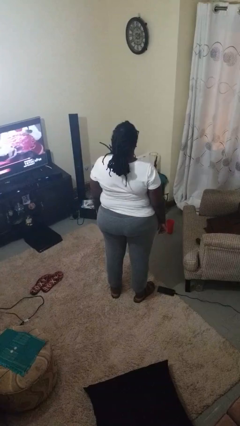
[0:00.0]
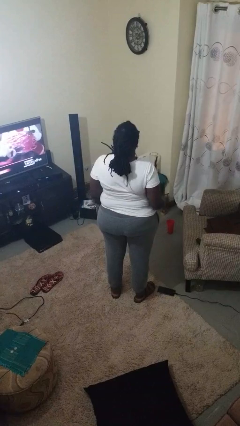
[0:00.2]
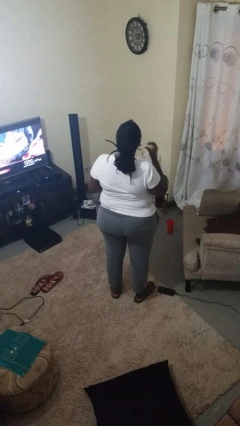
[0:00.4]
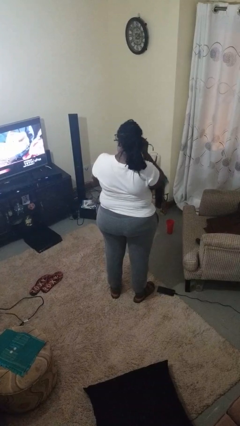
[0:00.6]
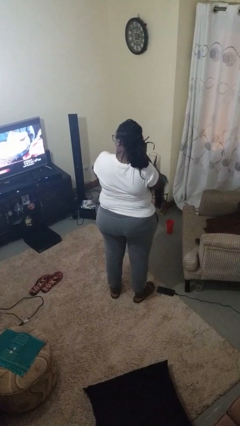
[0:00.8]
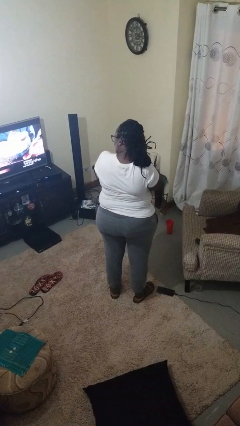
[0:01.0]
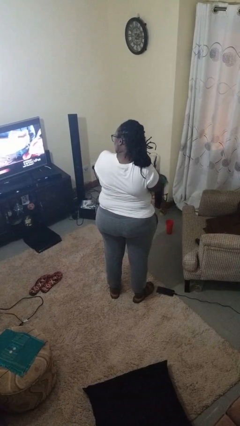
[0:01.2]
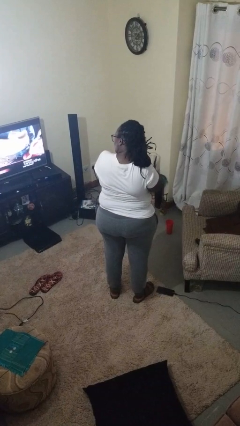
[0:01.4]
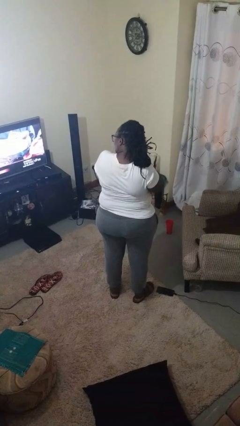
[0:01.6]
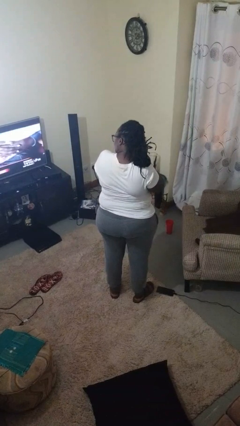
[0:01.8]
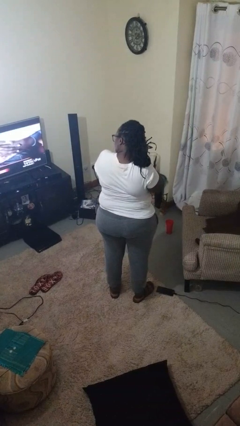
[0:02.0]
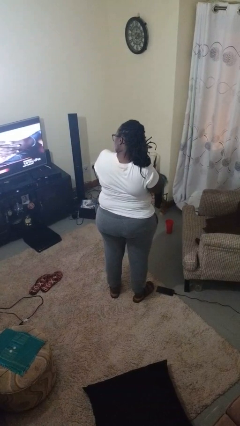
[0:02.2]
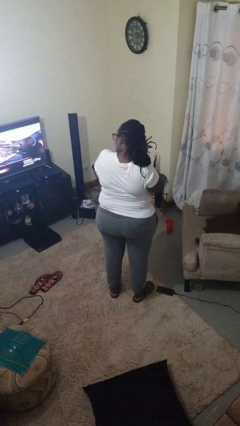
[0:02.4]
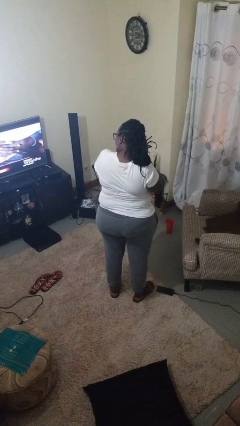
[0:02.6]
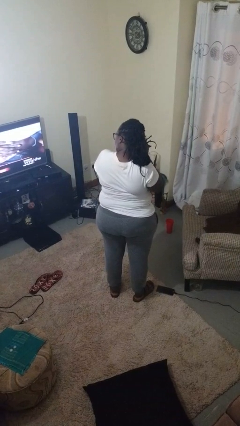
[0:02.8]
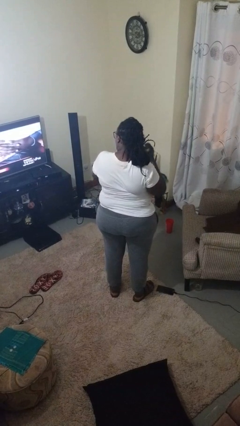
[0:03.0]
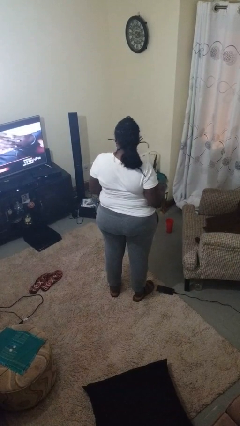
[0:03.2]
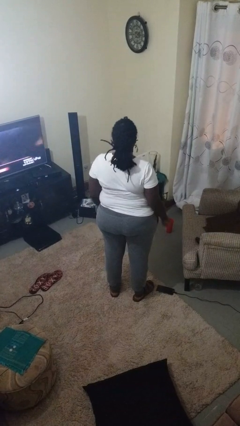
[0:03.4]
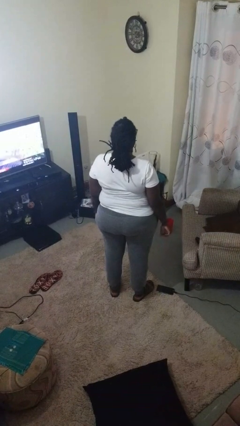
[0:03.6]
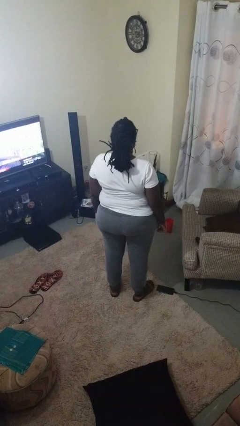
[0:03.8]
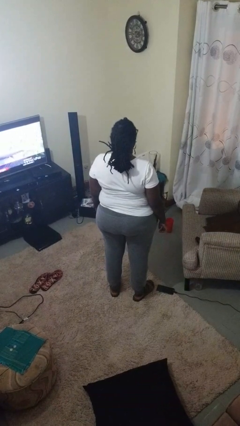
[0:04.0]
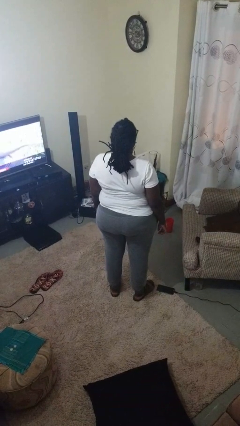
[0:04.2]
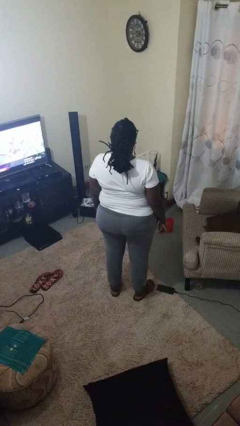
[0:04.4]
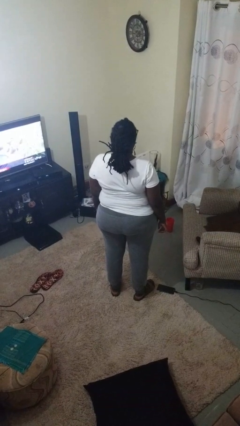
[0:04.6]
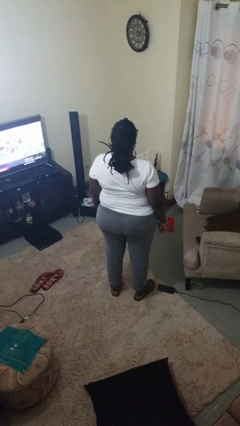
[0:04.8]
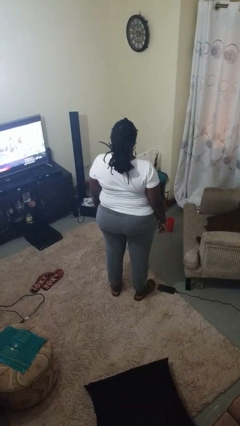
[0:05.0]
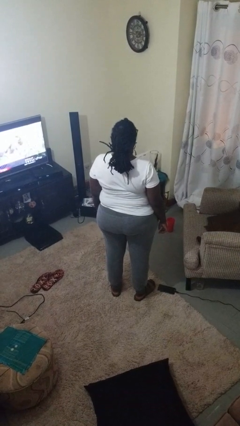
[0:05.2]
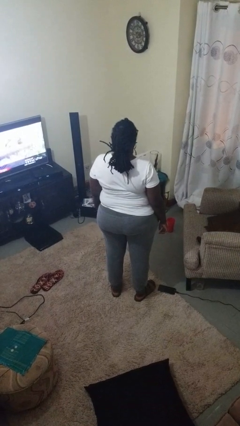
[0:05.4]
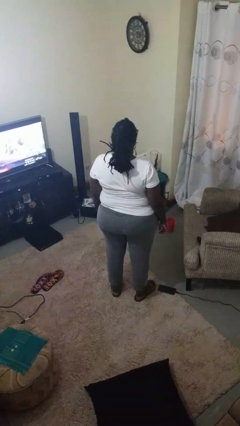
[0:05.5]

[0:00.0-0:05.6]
person puts on earrings

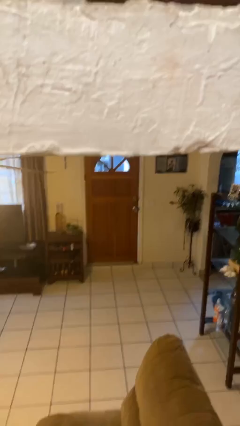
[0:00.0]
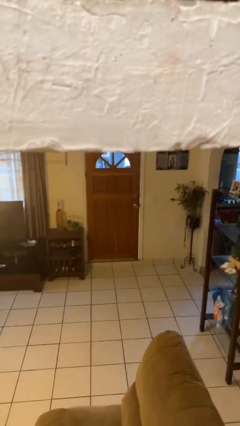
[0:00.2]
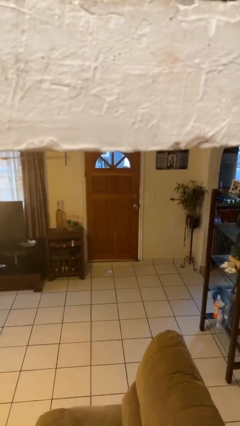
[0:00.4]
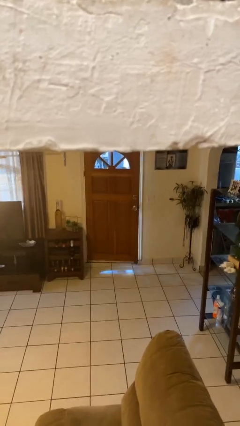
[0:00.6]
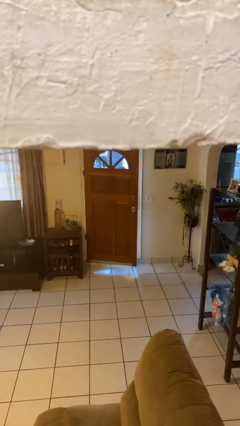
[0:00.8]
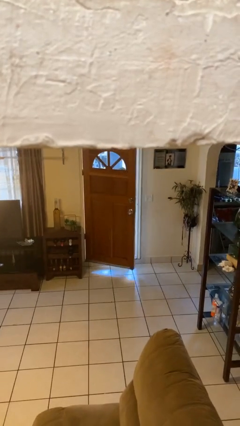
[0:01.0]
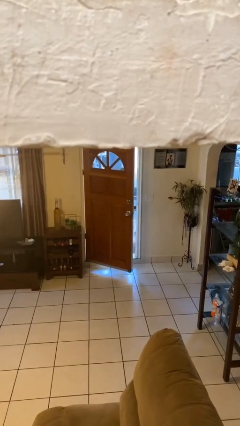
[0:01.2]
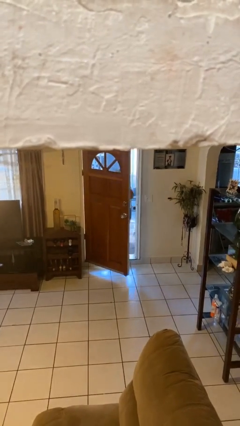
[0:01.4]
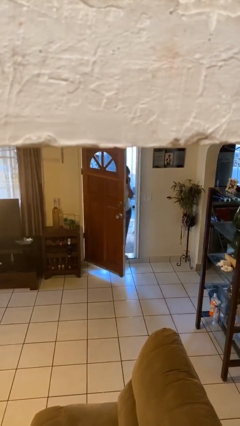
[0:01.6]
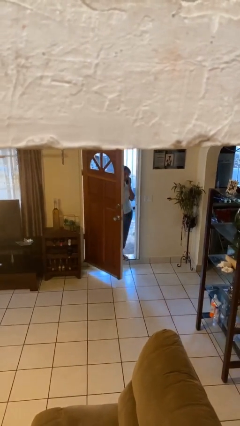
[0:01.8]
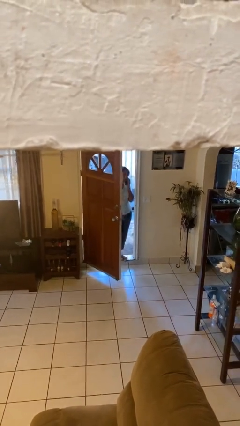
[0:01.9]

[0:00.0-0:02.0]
person opens facility door

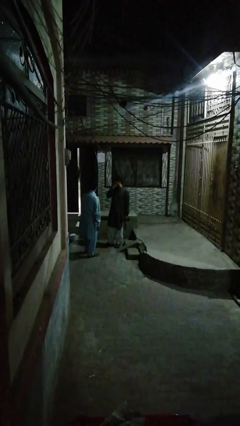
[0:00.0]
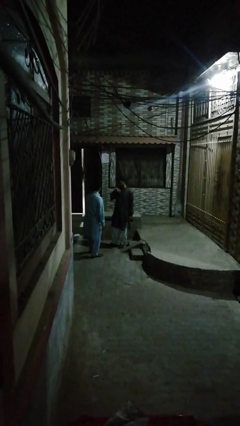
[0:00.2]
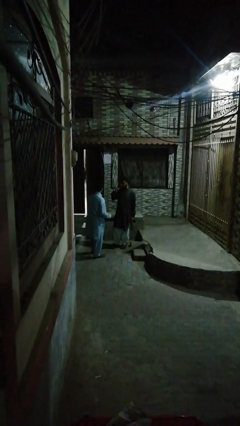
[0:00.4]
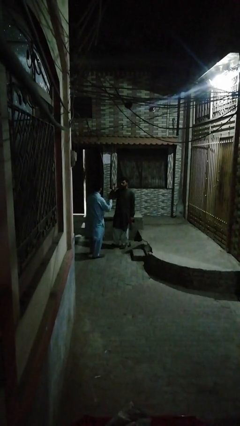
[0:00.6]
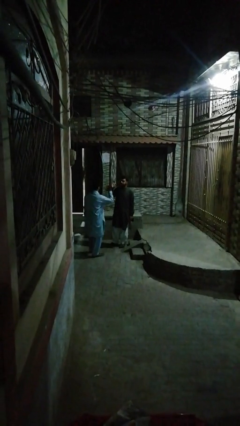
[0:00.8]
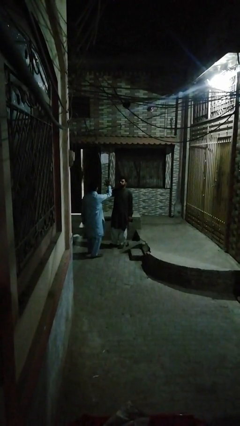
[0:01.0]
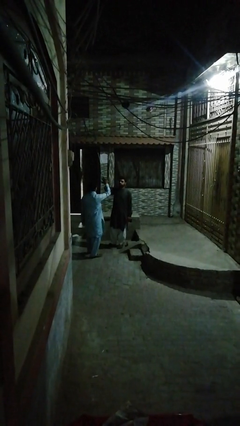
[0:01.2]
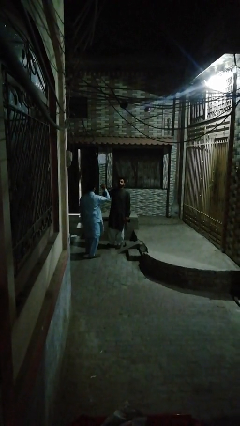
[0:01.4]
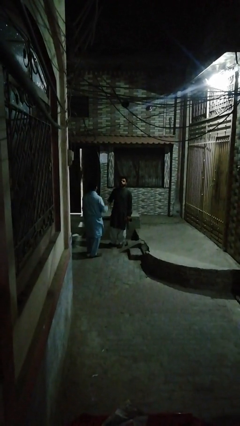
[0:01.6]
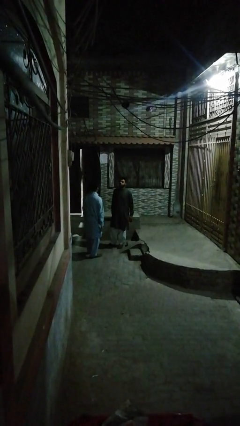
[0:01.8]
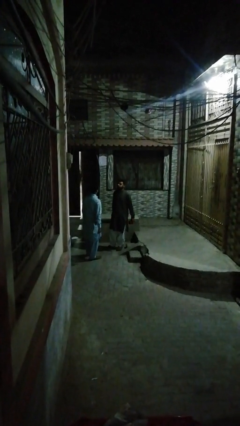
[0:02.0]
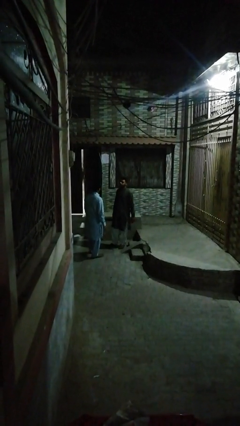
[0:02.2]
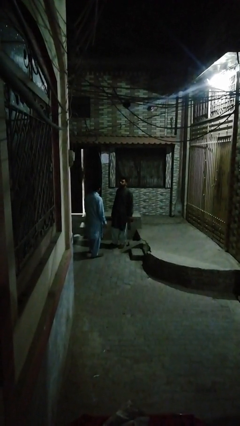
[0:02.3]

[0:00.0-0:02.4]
person highfives hand

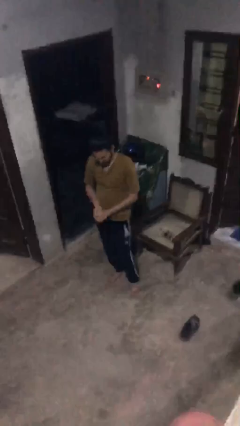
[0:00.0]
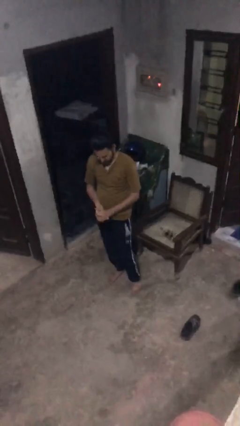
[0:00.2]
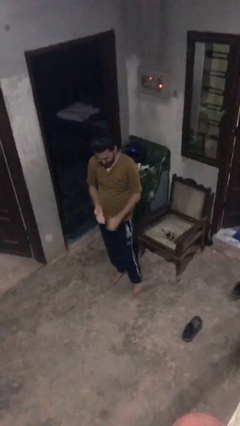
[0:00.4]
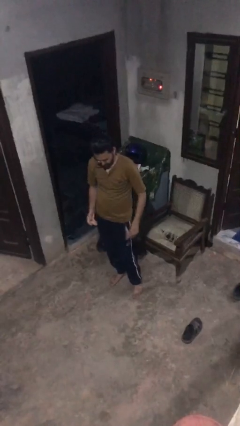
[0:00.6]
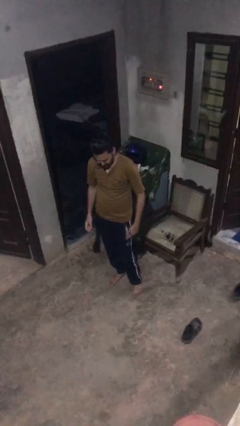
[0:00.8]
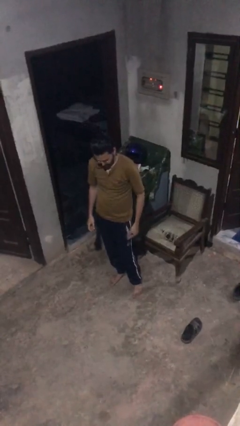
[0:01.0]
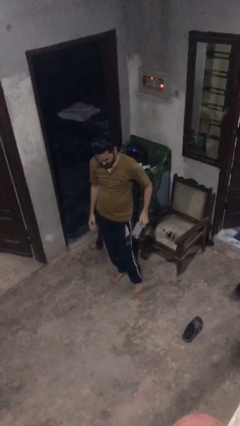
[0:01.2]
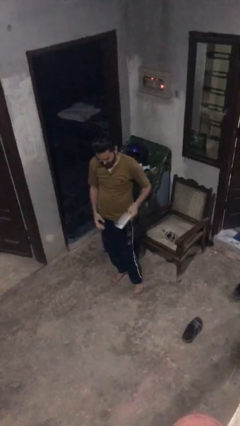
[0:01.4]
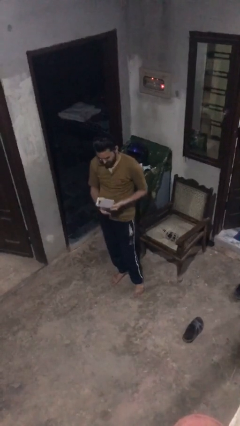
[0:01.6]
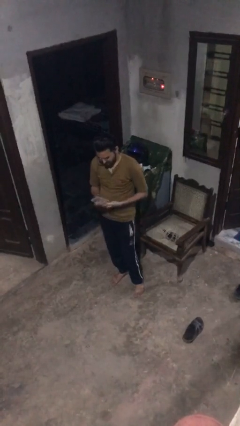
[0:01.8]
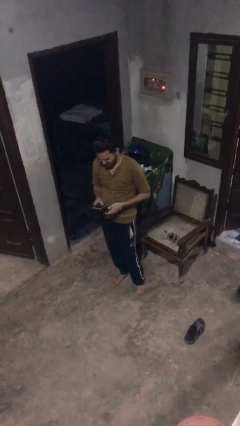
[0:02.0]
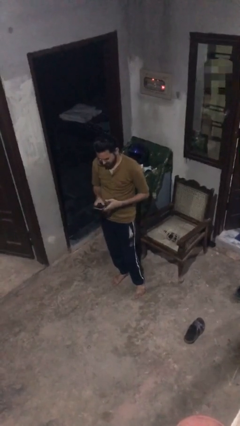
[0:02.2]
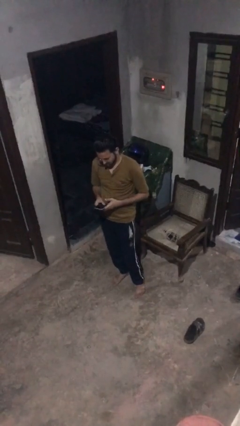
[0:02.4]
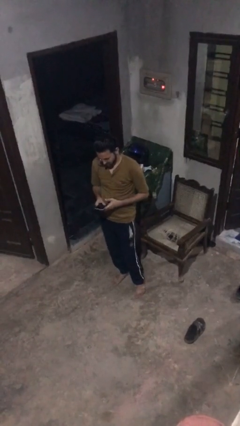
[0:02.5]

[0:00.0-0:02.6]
person takes phone from pocket

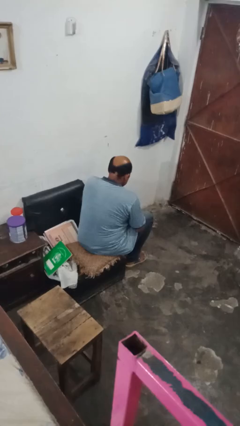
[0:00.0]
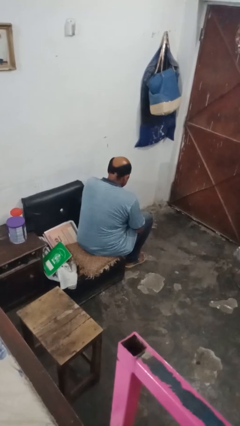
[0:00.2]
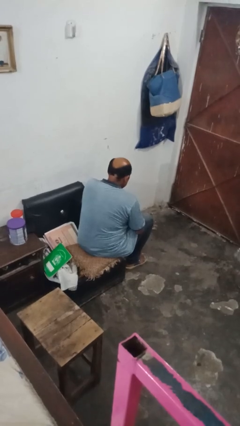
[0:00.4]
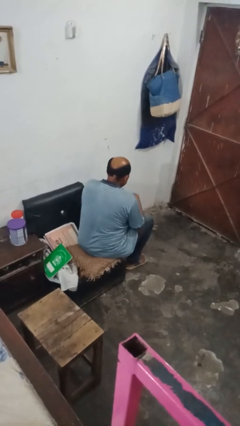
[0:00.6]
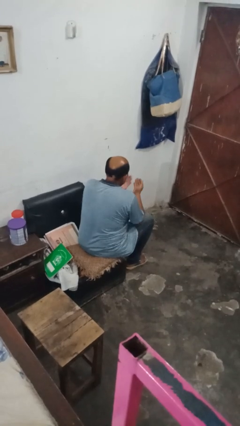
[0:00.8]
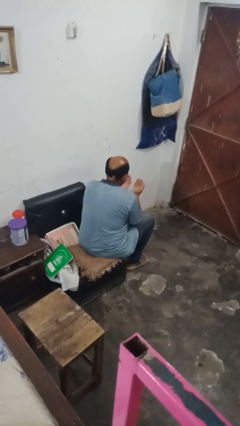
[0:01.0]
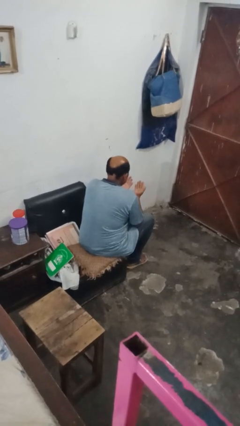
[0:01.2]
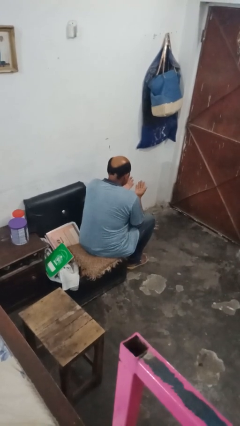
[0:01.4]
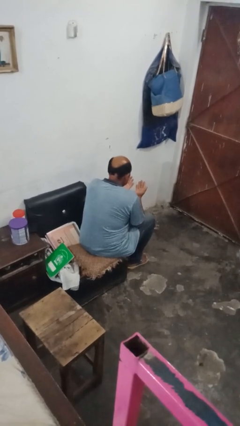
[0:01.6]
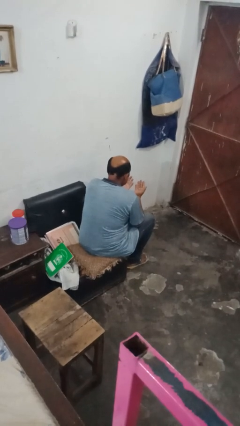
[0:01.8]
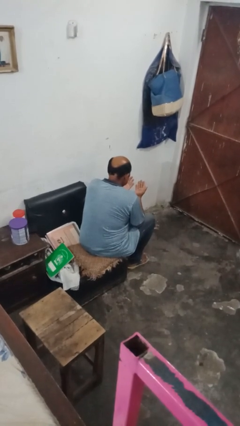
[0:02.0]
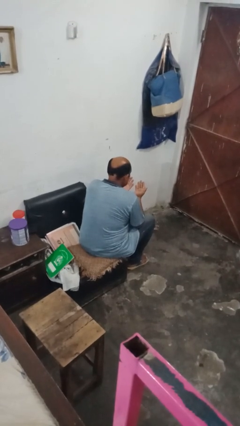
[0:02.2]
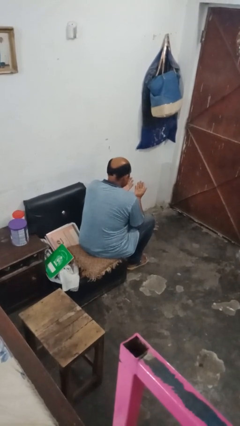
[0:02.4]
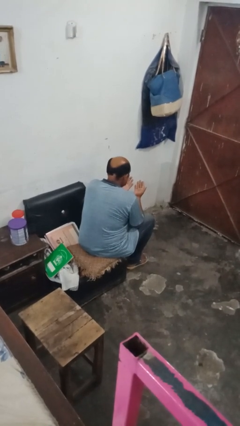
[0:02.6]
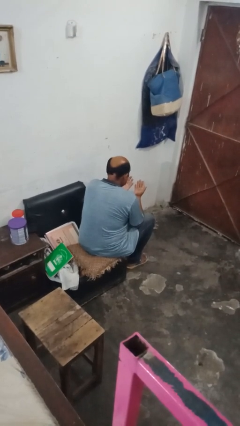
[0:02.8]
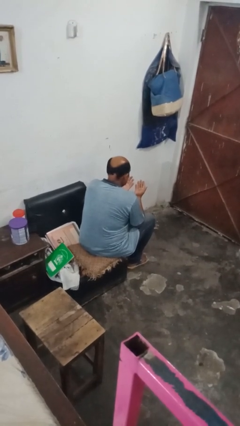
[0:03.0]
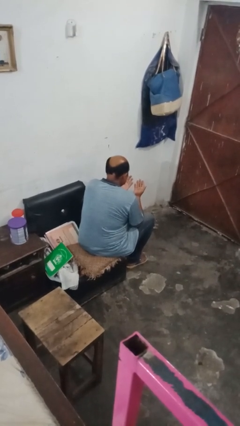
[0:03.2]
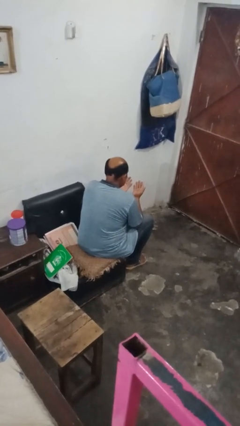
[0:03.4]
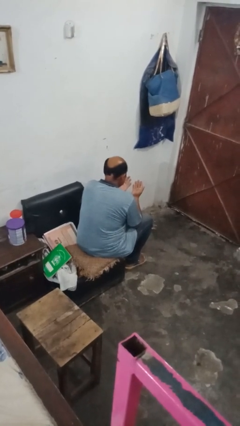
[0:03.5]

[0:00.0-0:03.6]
person looks at hands in lap

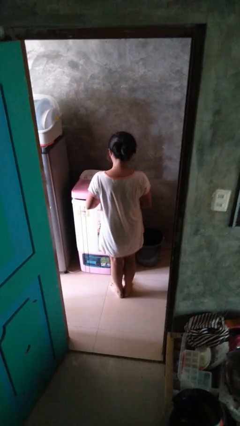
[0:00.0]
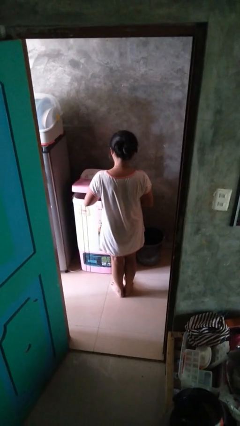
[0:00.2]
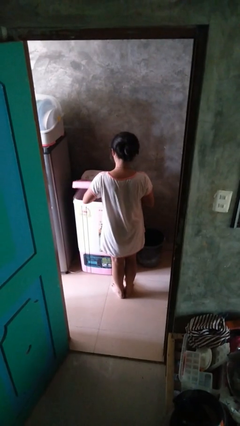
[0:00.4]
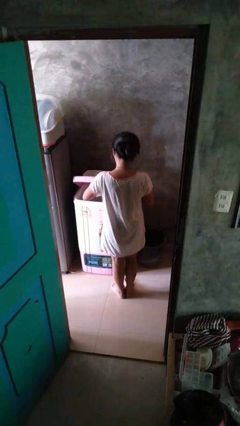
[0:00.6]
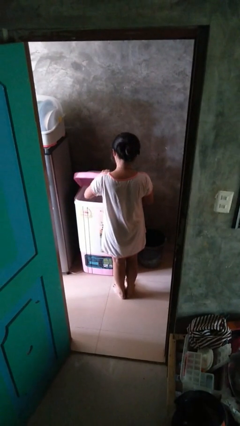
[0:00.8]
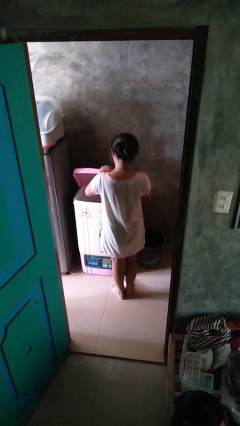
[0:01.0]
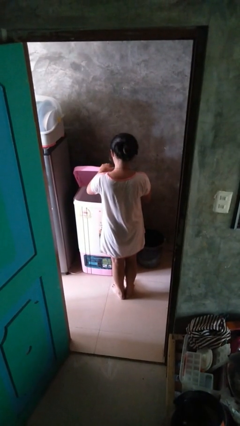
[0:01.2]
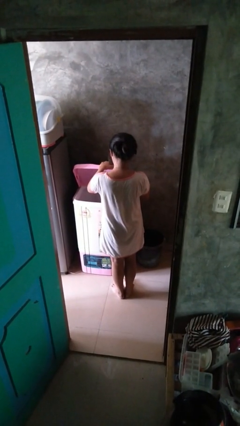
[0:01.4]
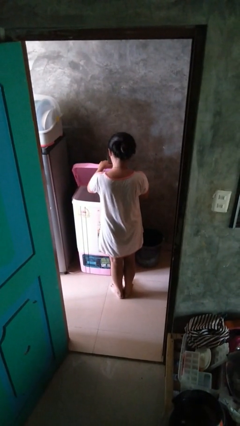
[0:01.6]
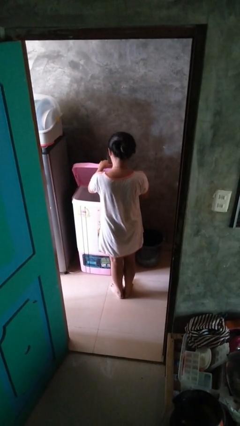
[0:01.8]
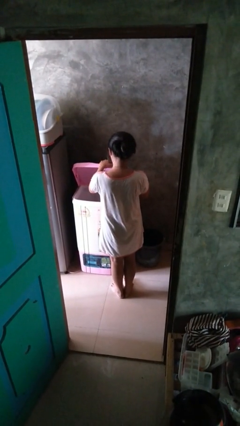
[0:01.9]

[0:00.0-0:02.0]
person opens clothes washer
